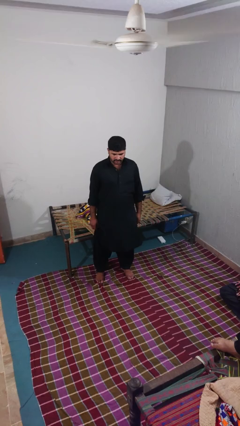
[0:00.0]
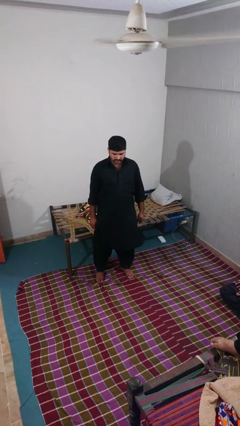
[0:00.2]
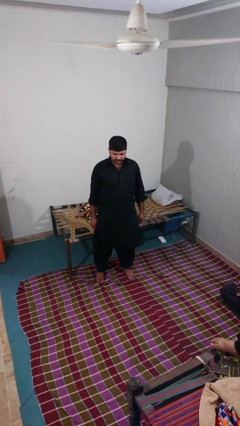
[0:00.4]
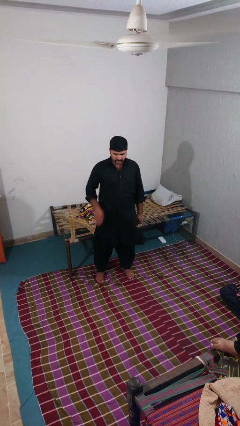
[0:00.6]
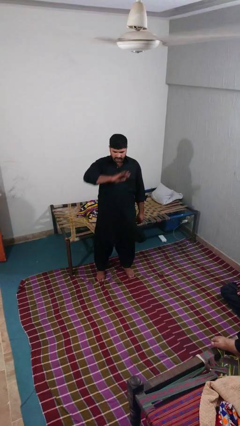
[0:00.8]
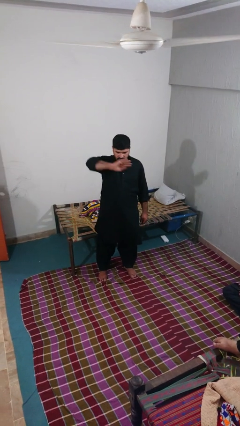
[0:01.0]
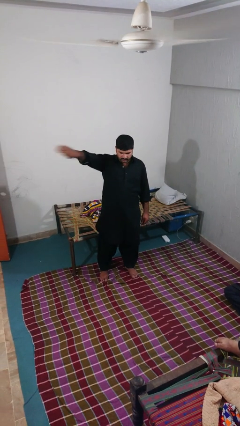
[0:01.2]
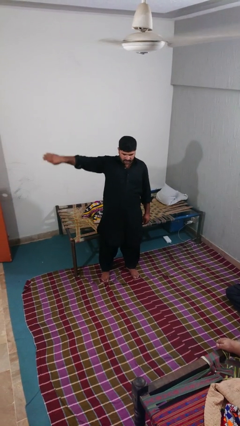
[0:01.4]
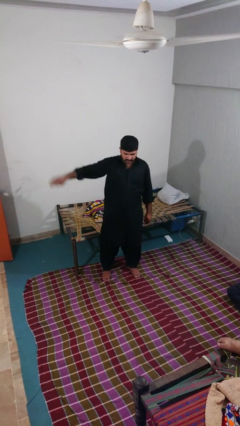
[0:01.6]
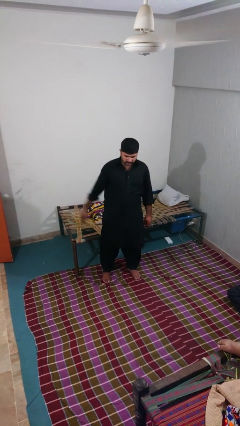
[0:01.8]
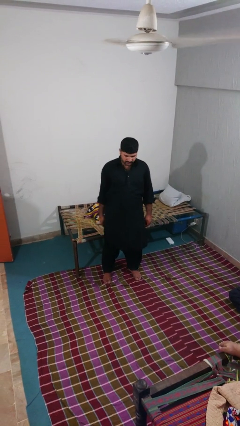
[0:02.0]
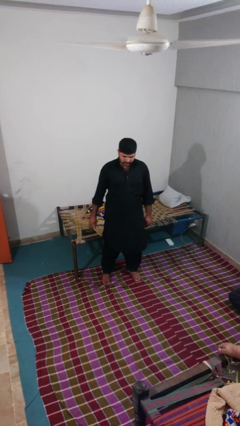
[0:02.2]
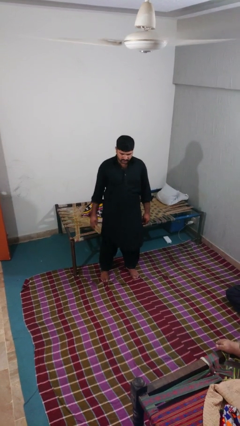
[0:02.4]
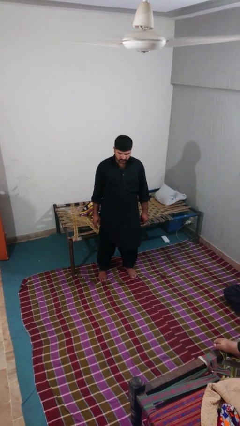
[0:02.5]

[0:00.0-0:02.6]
person gestures swipe right

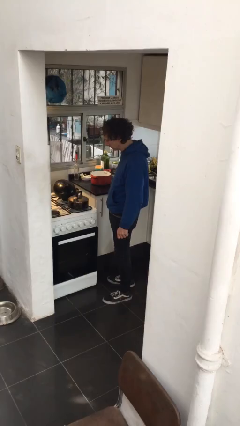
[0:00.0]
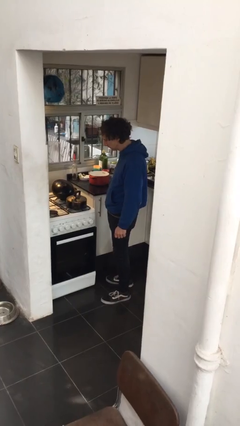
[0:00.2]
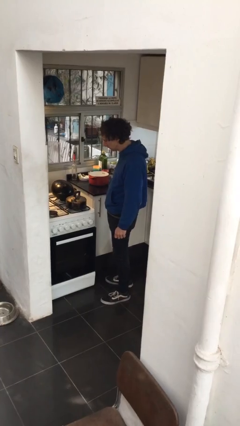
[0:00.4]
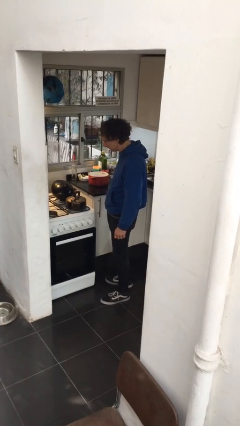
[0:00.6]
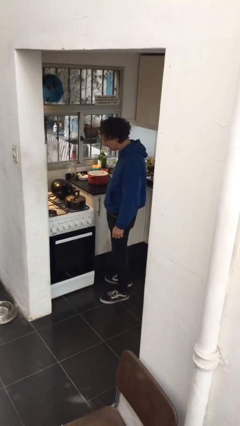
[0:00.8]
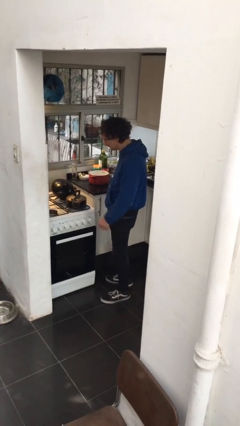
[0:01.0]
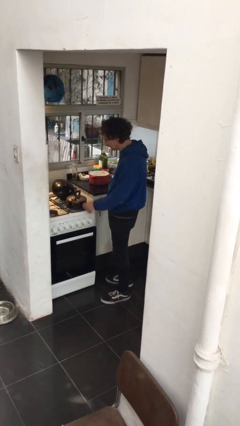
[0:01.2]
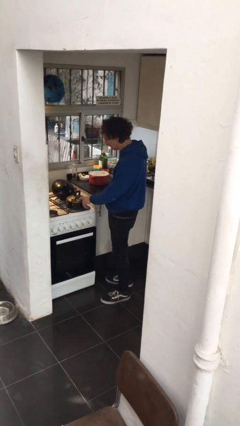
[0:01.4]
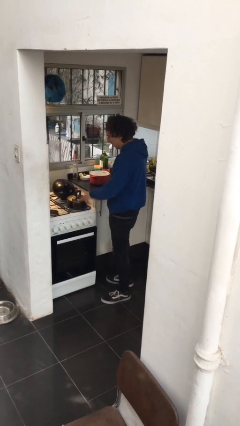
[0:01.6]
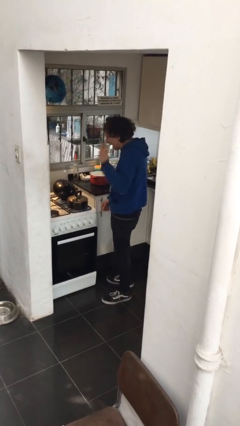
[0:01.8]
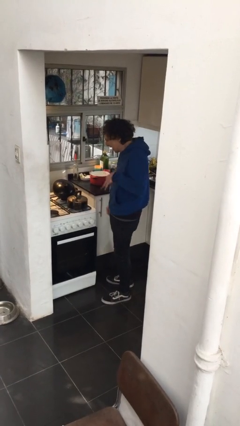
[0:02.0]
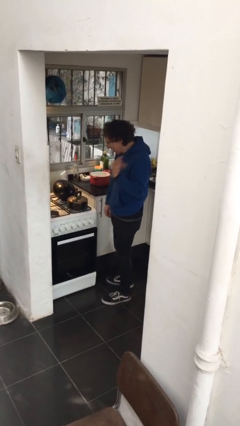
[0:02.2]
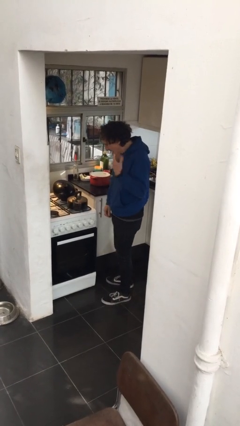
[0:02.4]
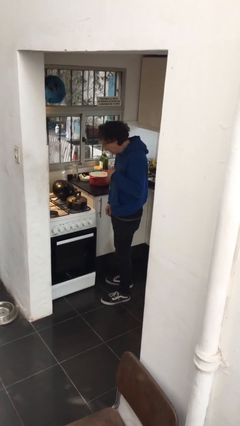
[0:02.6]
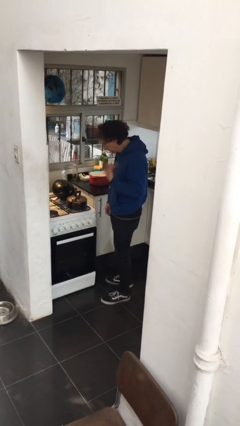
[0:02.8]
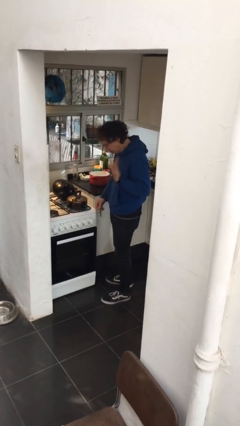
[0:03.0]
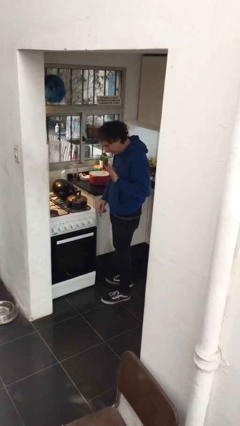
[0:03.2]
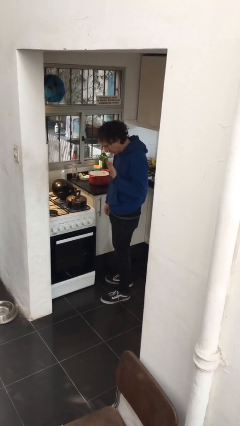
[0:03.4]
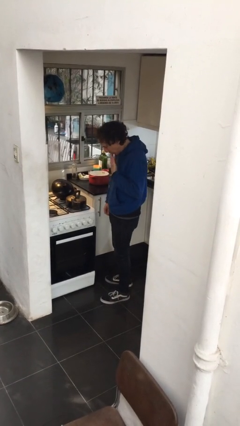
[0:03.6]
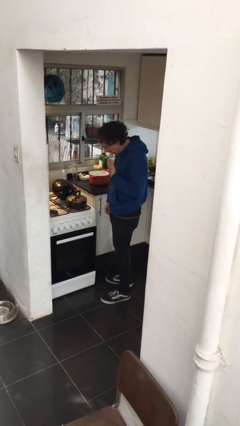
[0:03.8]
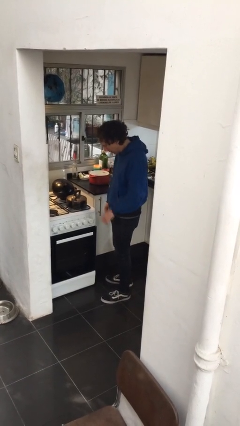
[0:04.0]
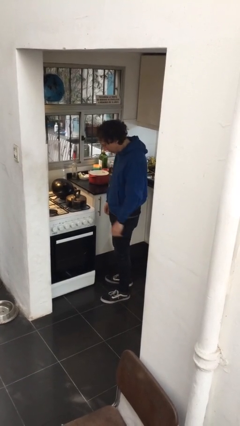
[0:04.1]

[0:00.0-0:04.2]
person burns hand

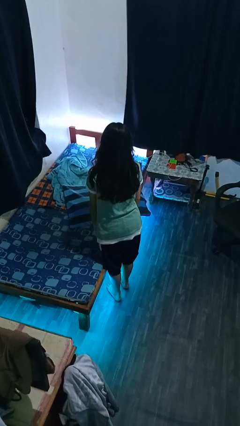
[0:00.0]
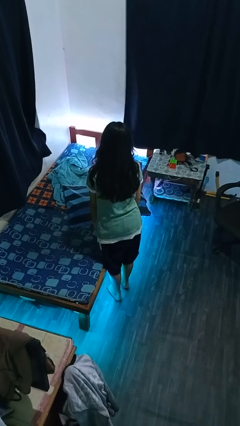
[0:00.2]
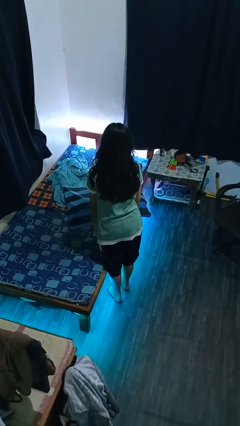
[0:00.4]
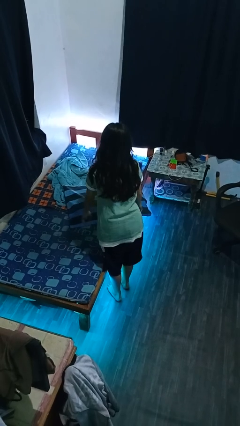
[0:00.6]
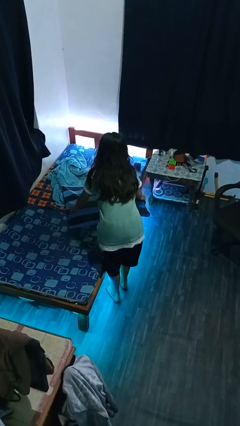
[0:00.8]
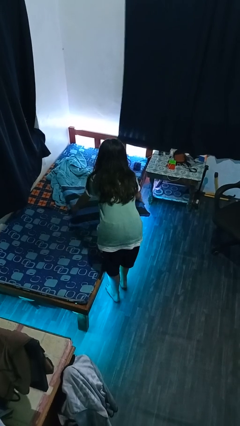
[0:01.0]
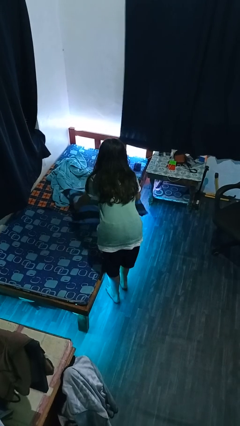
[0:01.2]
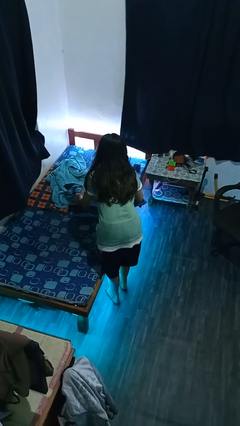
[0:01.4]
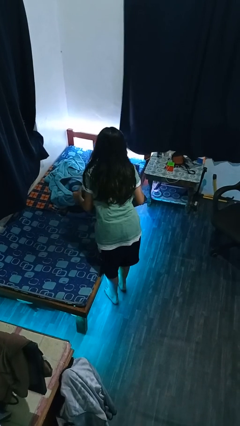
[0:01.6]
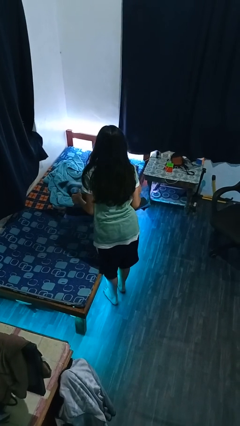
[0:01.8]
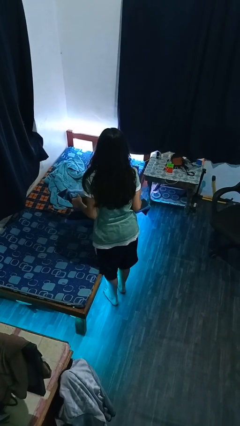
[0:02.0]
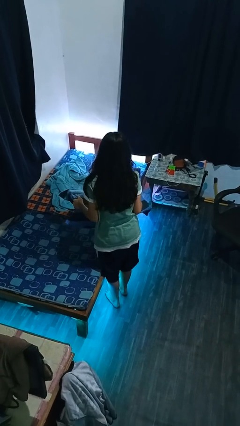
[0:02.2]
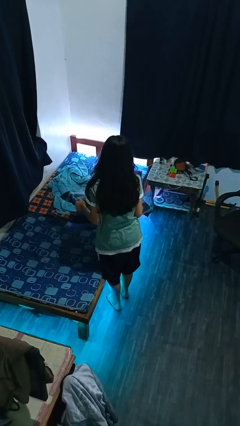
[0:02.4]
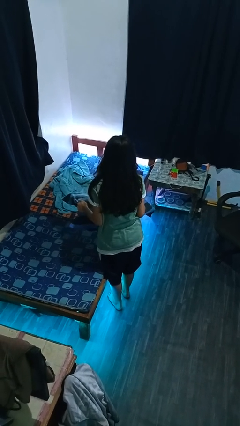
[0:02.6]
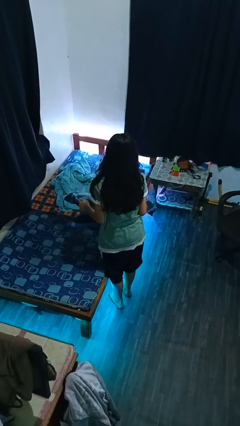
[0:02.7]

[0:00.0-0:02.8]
person picks up object from bed

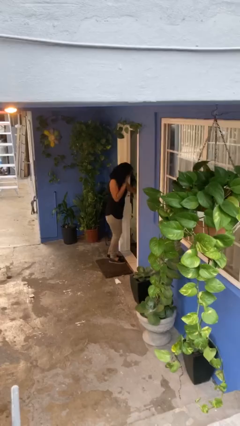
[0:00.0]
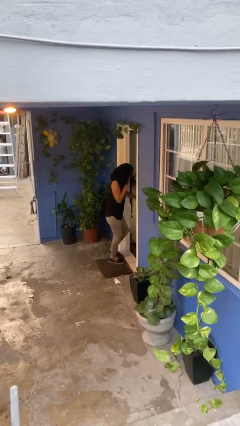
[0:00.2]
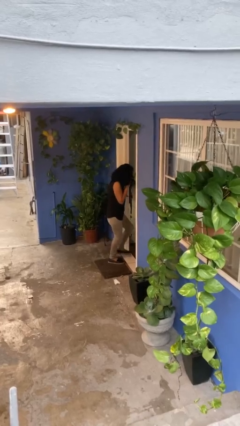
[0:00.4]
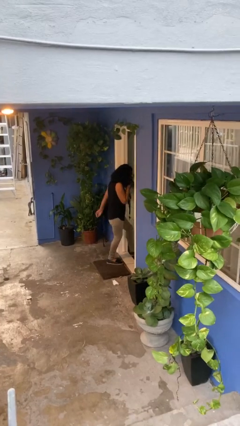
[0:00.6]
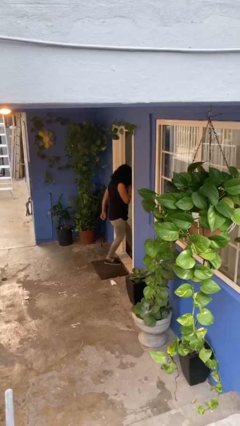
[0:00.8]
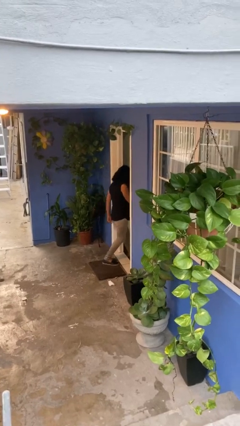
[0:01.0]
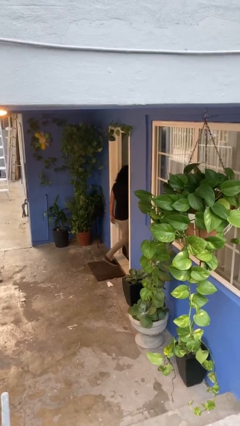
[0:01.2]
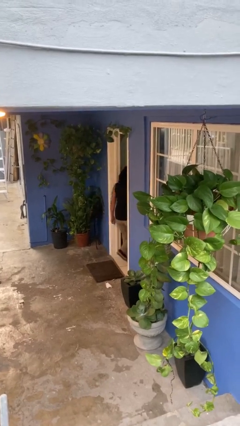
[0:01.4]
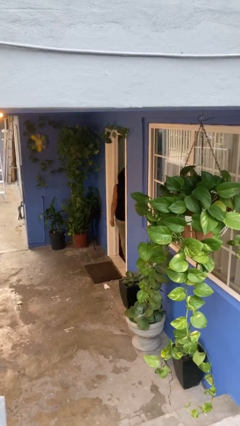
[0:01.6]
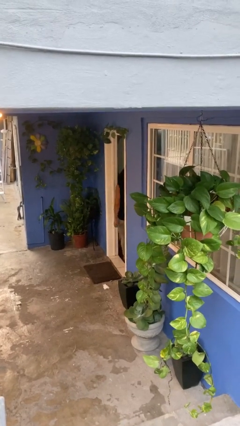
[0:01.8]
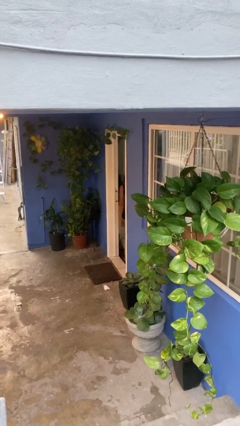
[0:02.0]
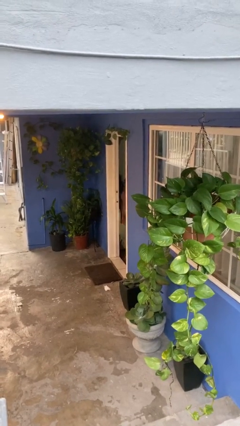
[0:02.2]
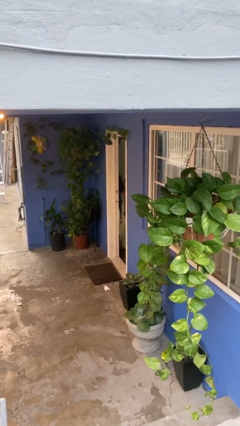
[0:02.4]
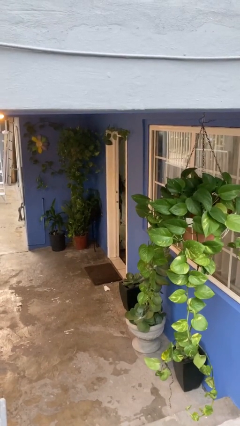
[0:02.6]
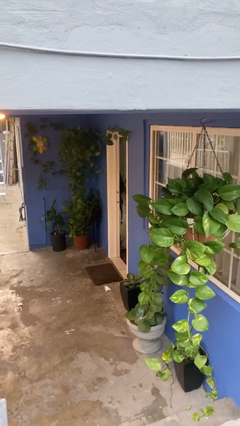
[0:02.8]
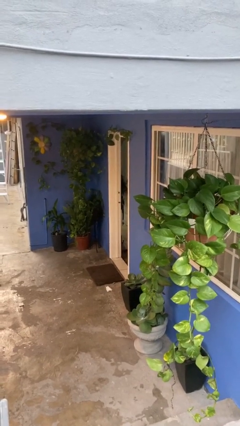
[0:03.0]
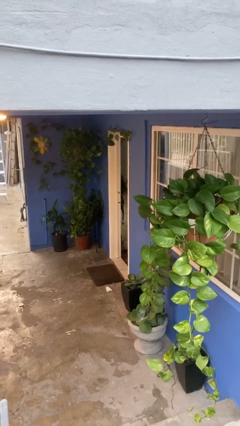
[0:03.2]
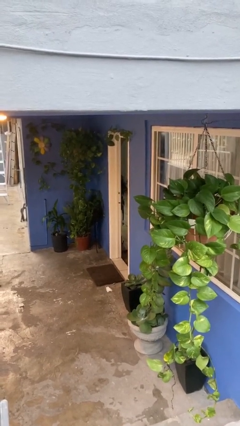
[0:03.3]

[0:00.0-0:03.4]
person exits scene through structure

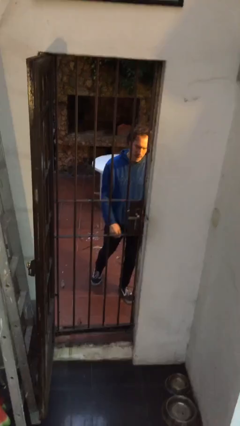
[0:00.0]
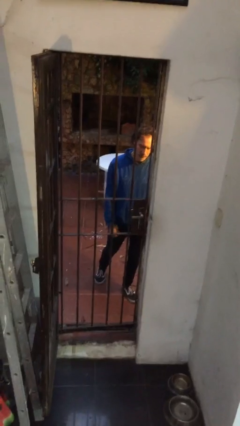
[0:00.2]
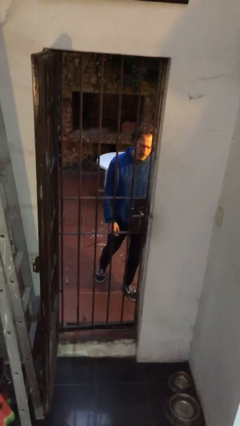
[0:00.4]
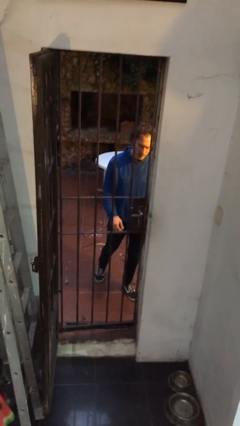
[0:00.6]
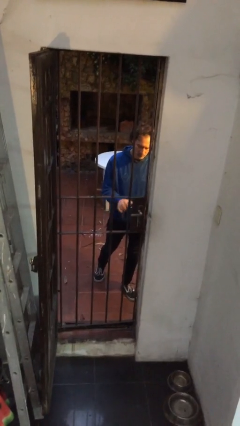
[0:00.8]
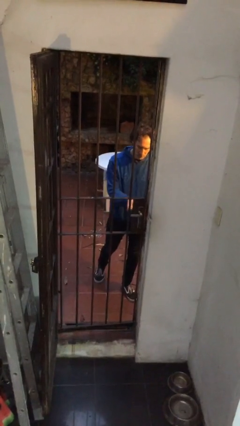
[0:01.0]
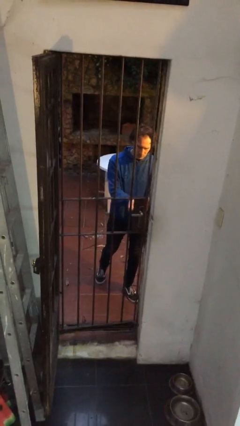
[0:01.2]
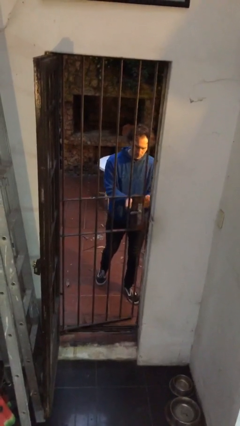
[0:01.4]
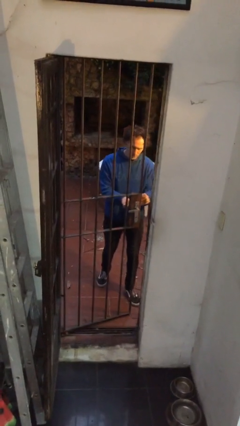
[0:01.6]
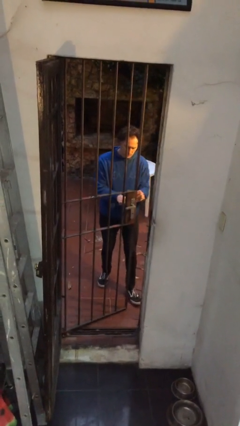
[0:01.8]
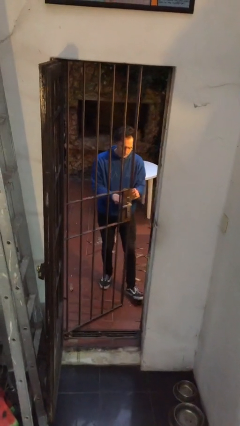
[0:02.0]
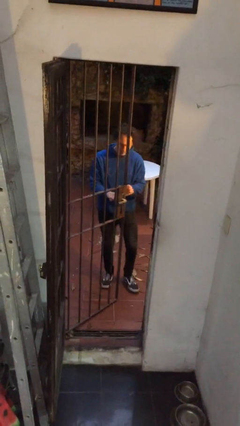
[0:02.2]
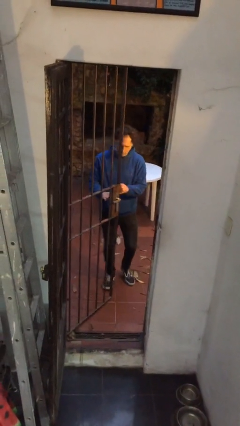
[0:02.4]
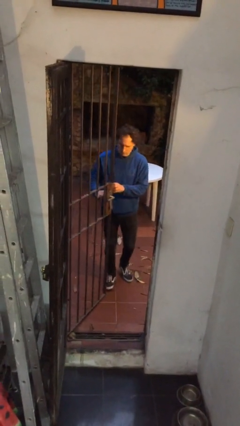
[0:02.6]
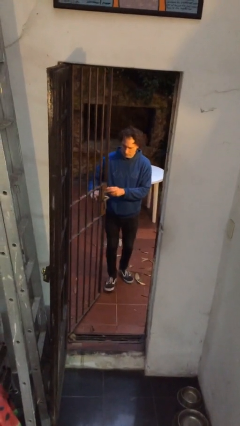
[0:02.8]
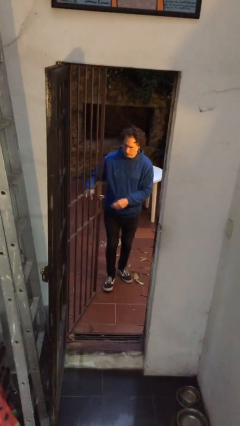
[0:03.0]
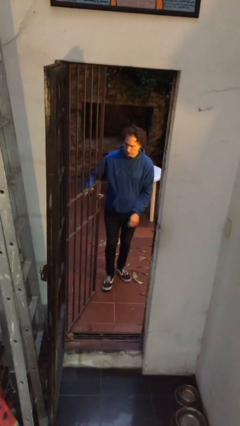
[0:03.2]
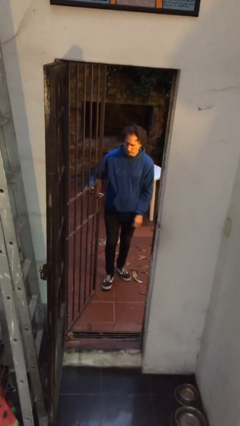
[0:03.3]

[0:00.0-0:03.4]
person opens gate

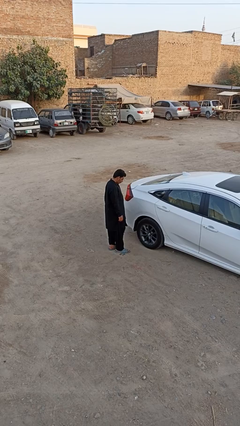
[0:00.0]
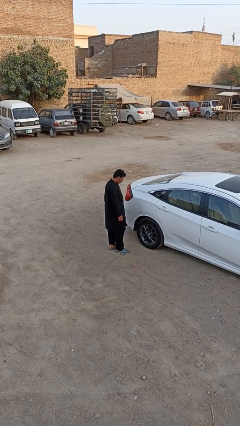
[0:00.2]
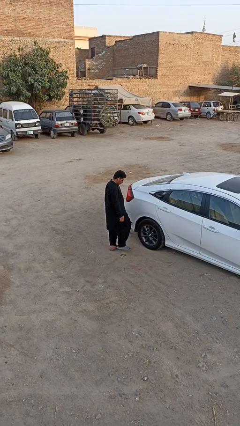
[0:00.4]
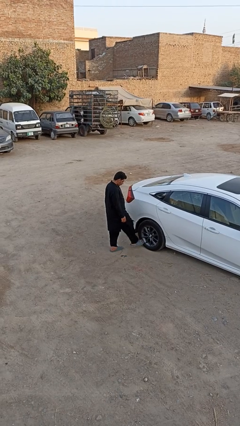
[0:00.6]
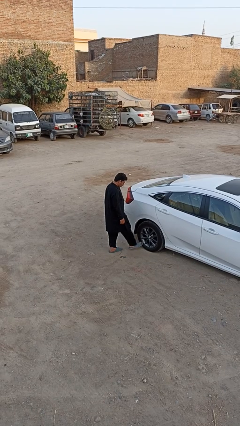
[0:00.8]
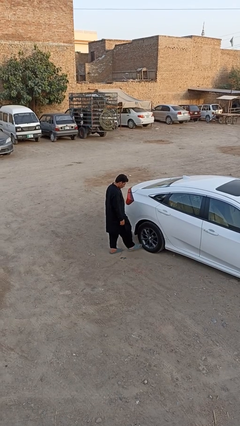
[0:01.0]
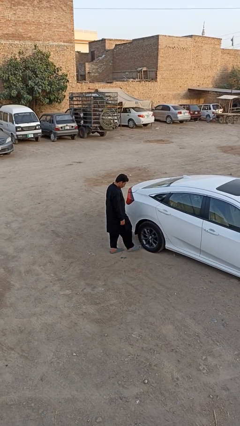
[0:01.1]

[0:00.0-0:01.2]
person kicks car tires
